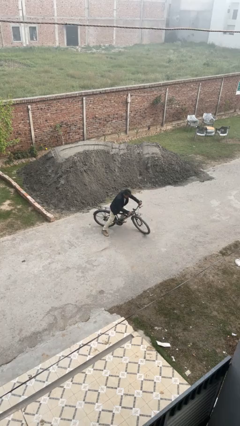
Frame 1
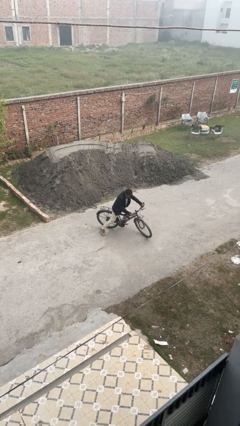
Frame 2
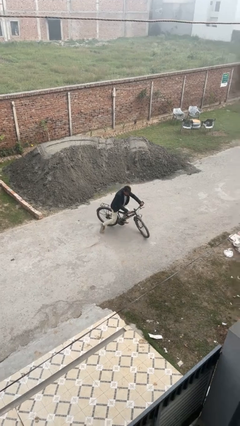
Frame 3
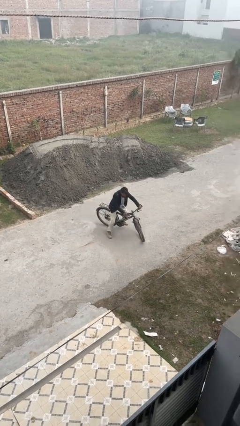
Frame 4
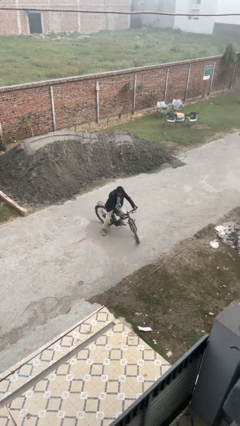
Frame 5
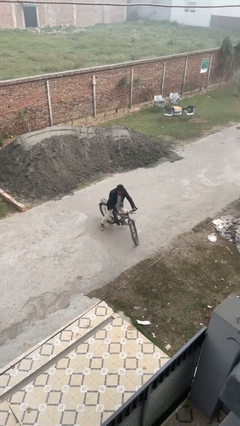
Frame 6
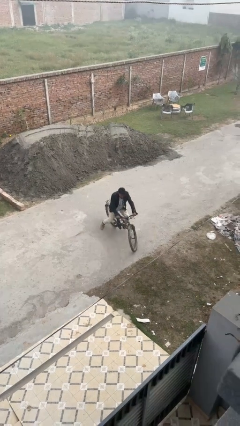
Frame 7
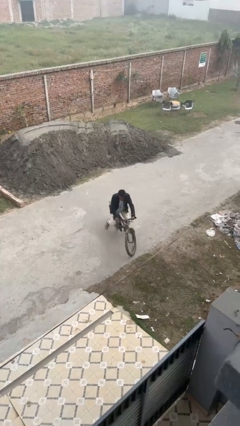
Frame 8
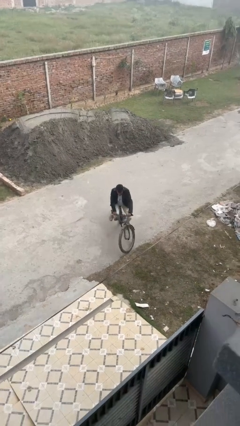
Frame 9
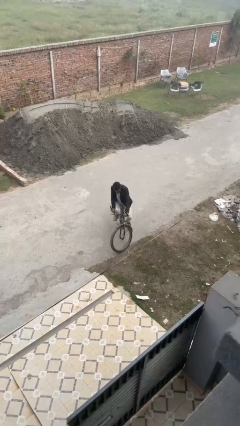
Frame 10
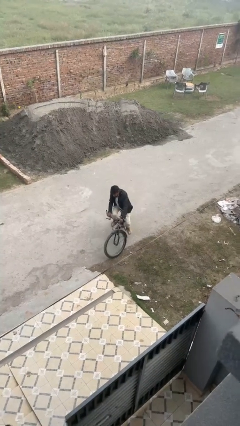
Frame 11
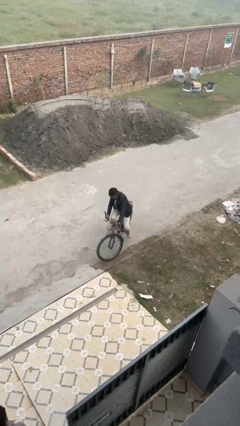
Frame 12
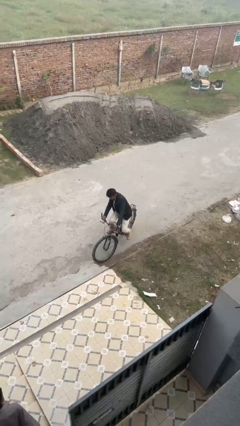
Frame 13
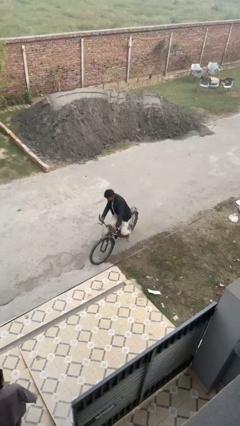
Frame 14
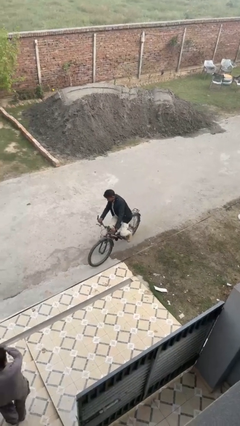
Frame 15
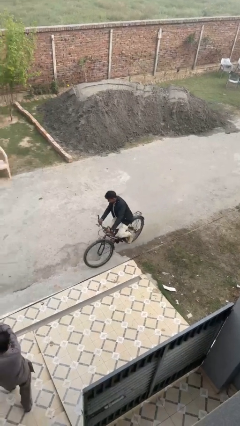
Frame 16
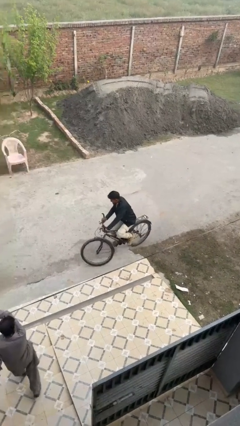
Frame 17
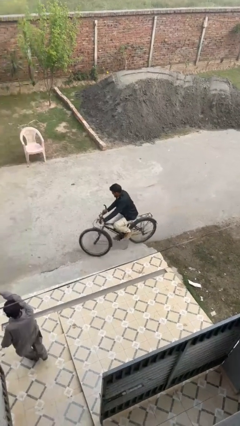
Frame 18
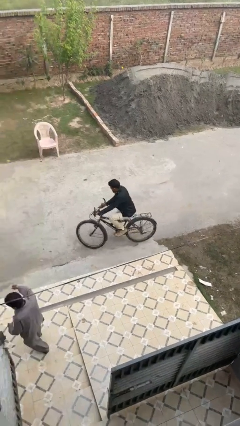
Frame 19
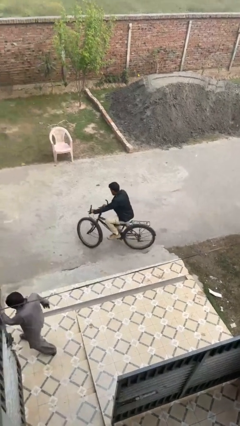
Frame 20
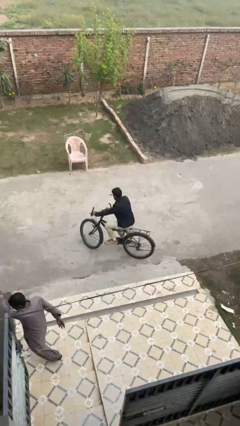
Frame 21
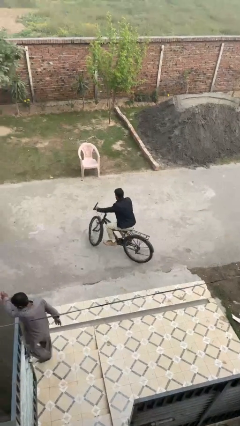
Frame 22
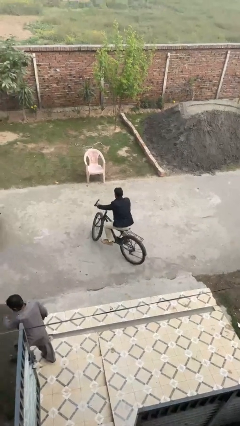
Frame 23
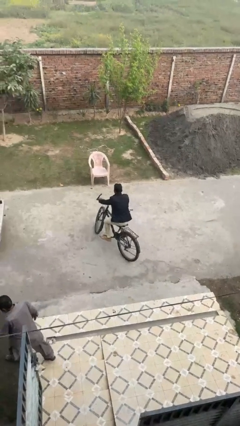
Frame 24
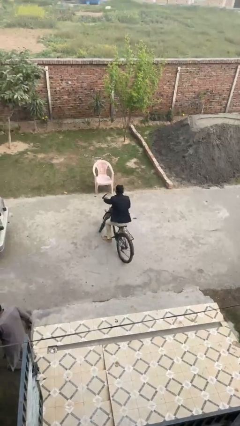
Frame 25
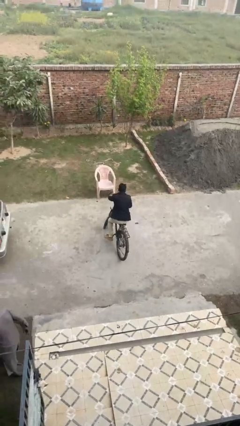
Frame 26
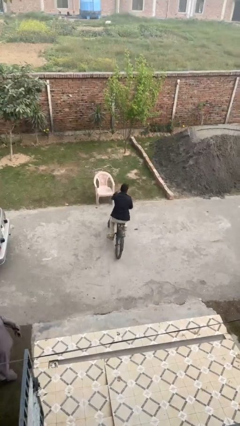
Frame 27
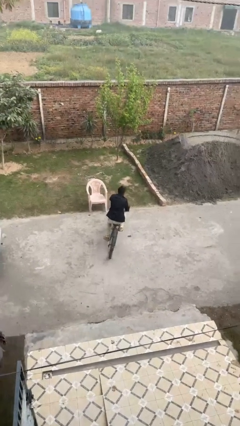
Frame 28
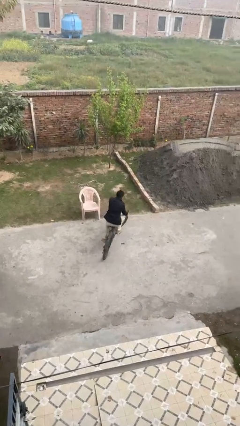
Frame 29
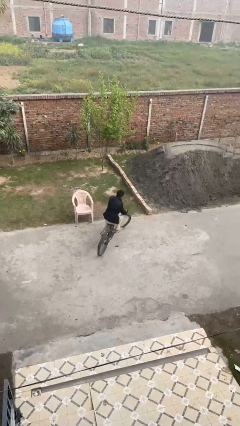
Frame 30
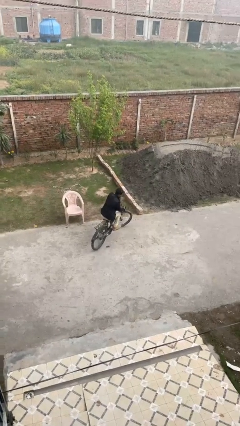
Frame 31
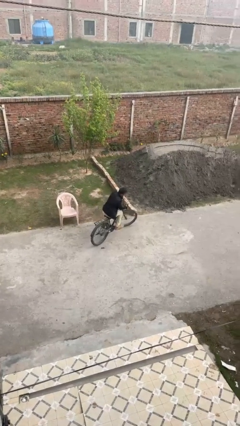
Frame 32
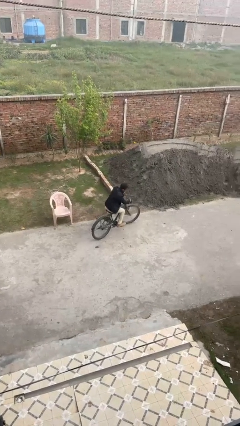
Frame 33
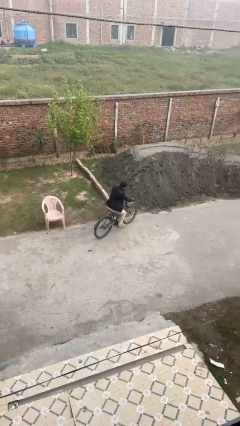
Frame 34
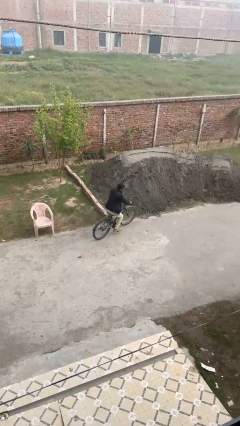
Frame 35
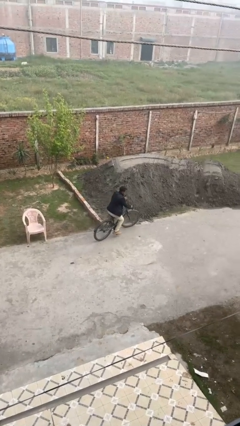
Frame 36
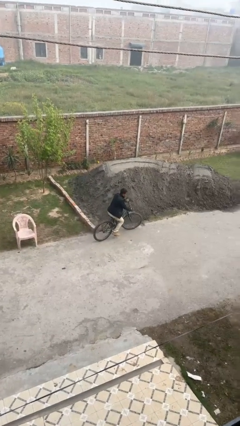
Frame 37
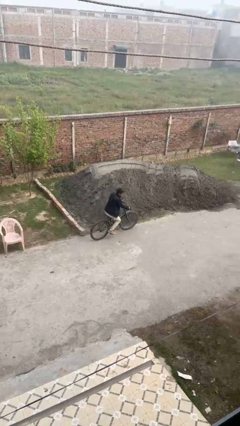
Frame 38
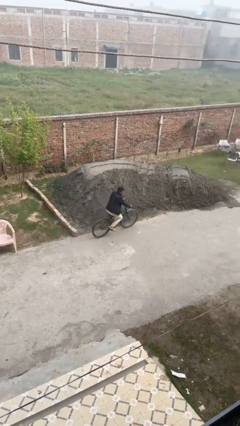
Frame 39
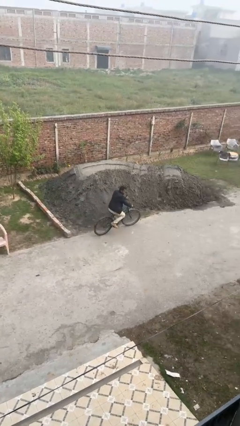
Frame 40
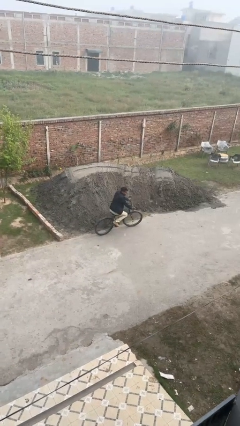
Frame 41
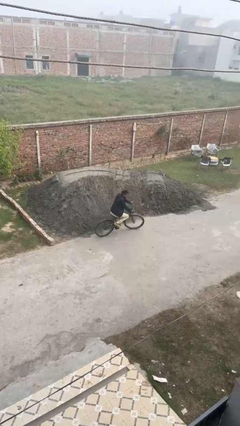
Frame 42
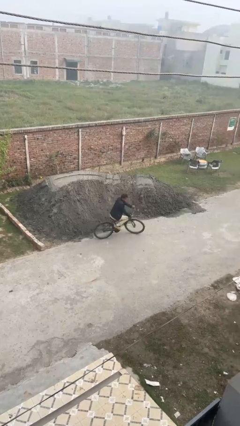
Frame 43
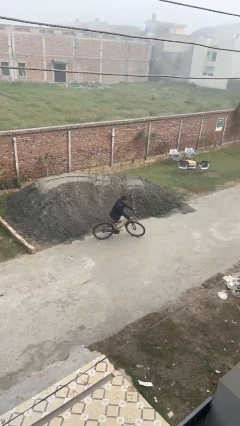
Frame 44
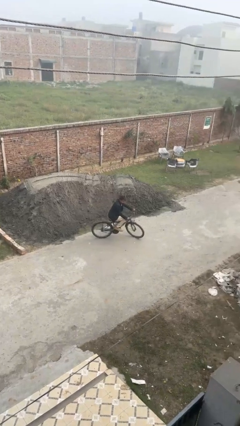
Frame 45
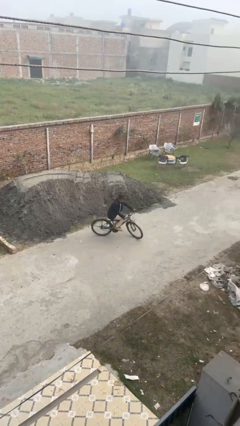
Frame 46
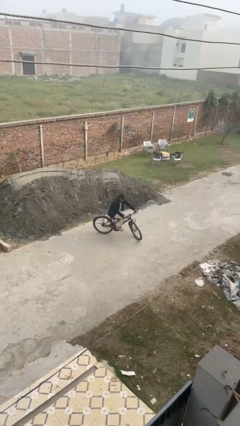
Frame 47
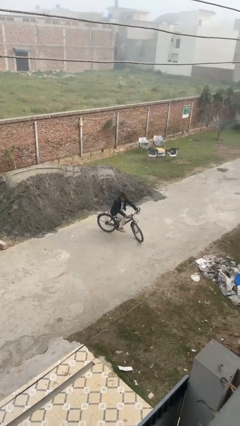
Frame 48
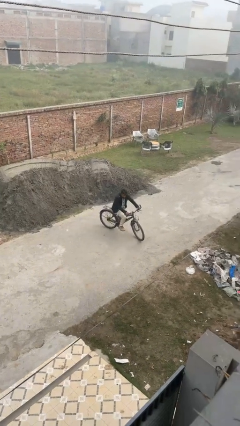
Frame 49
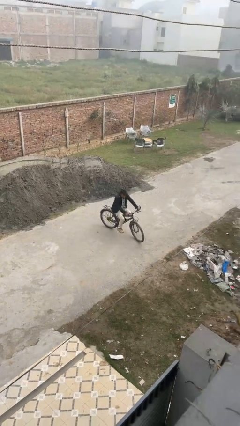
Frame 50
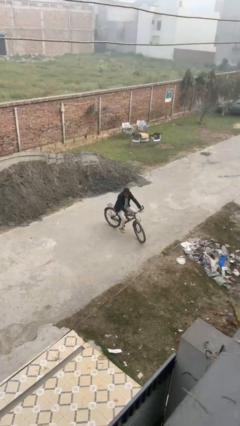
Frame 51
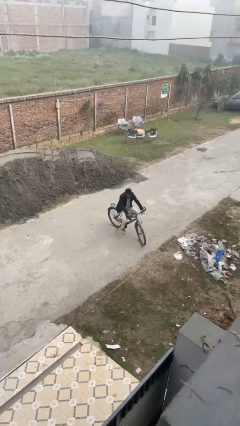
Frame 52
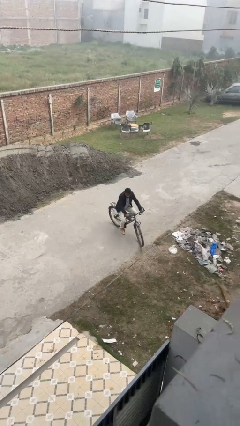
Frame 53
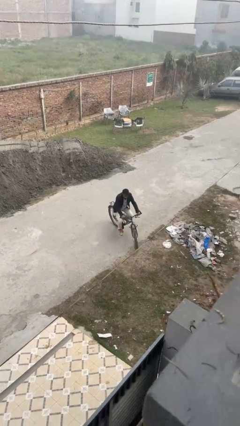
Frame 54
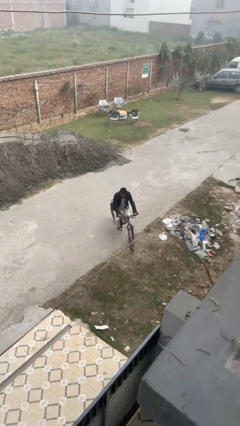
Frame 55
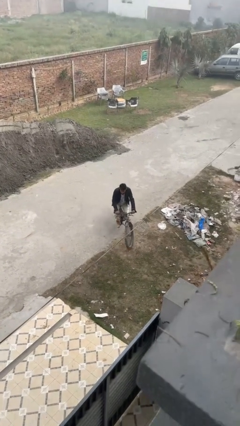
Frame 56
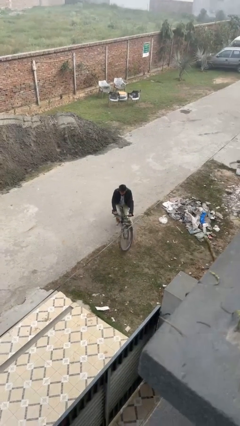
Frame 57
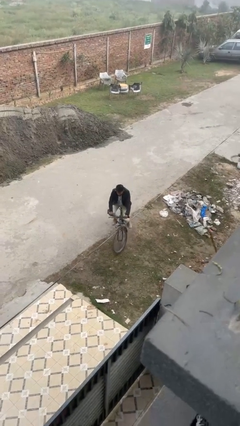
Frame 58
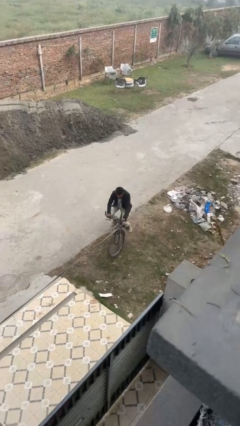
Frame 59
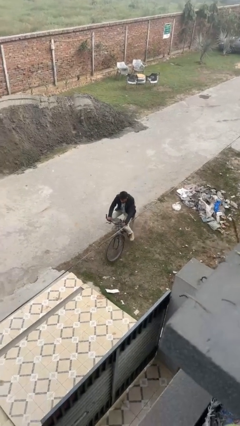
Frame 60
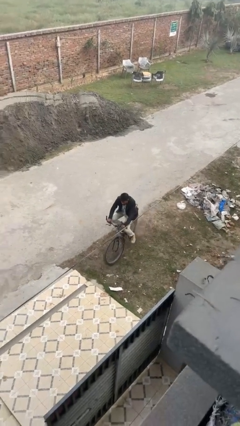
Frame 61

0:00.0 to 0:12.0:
person rides bicycle

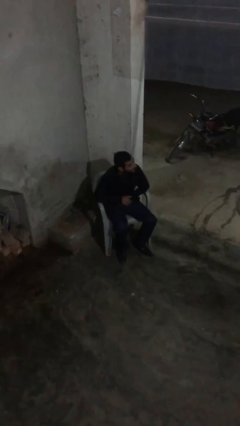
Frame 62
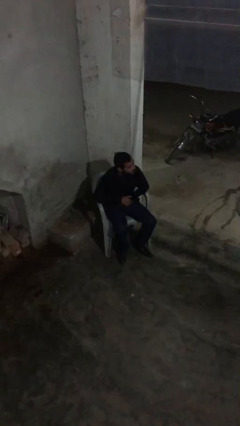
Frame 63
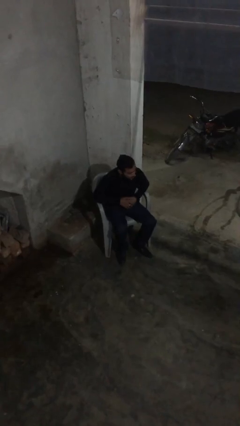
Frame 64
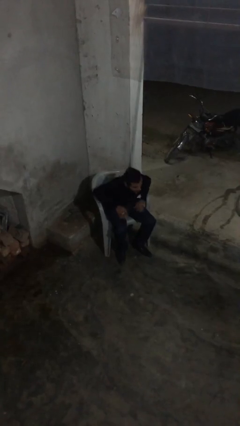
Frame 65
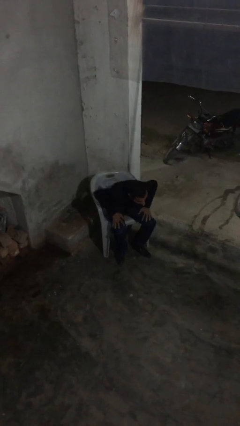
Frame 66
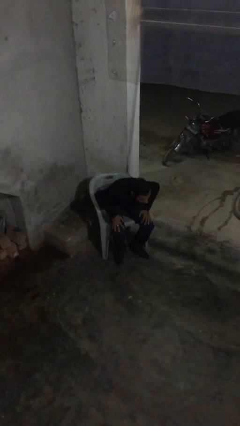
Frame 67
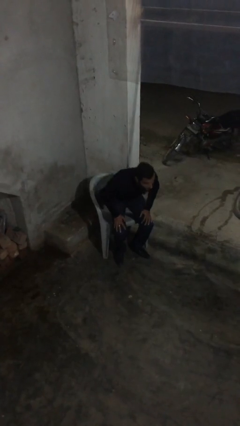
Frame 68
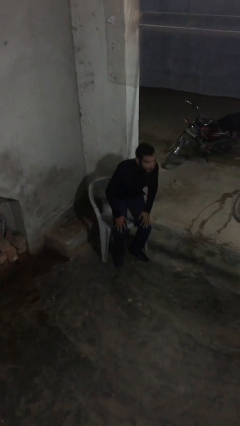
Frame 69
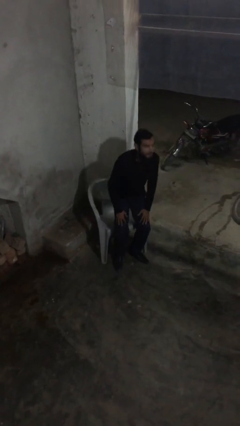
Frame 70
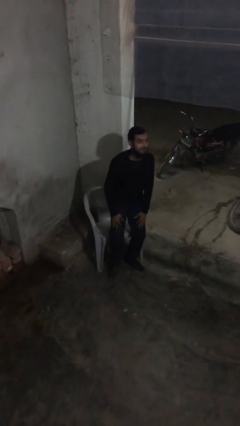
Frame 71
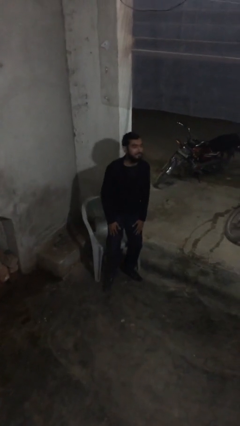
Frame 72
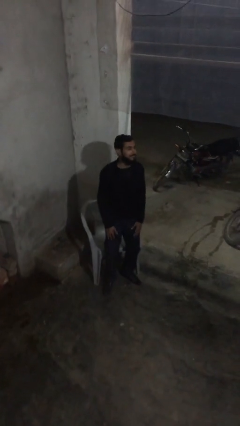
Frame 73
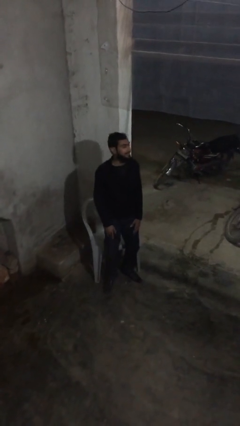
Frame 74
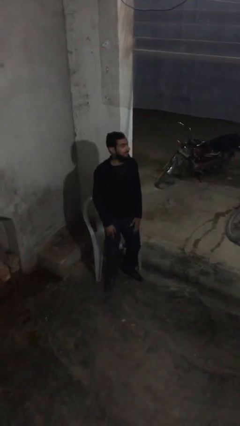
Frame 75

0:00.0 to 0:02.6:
person stands up

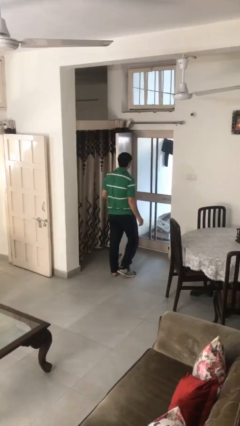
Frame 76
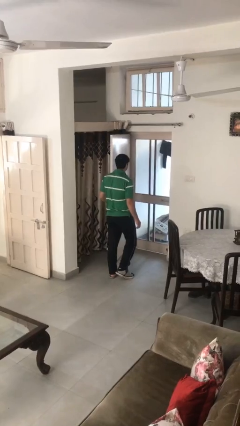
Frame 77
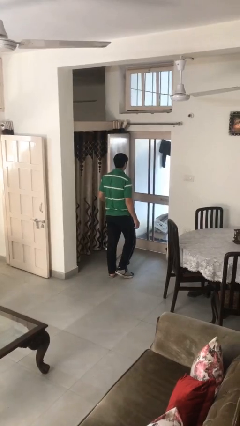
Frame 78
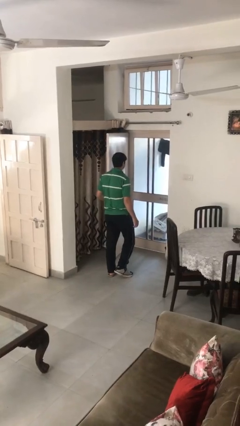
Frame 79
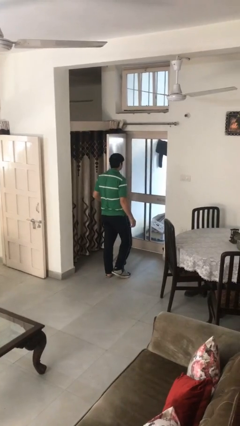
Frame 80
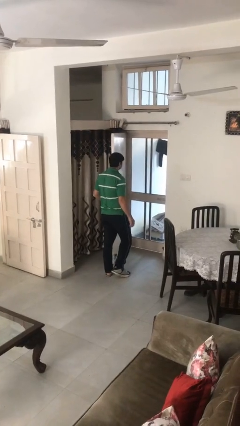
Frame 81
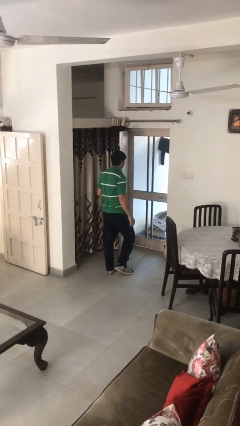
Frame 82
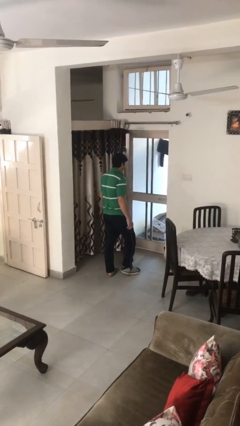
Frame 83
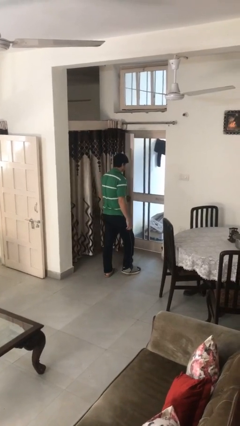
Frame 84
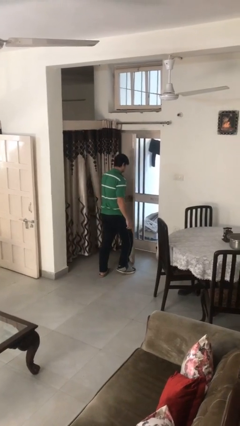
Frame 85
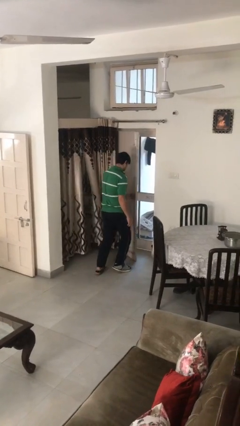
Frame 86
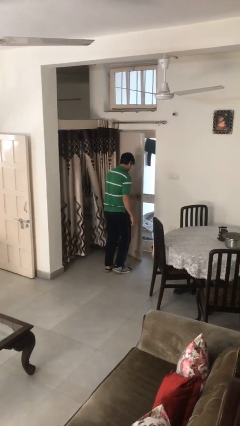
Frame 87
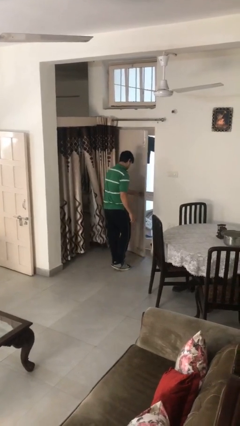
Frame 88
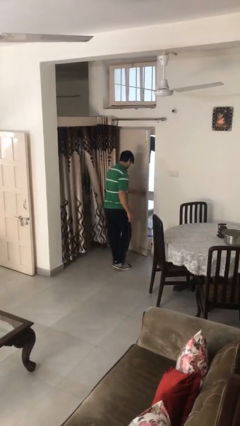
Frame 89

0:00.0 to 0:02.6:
person closes facility door

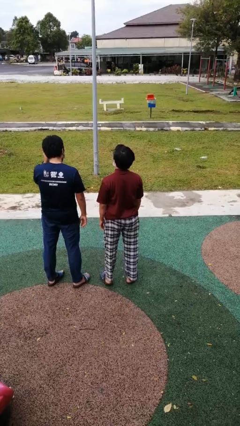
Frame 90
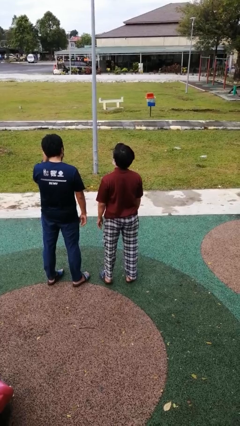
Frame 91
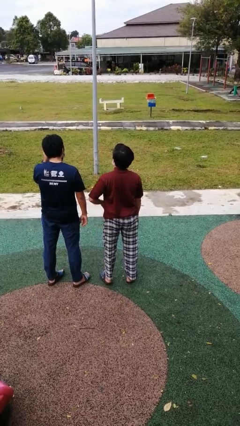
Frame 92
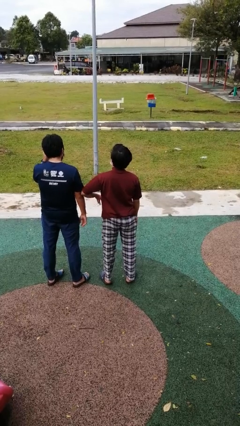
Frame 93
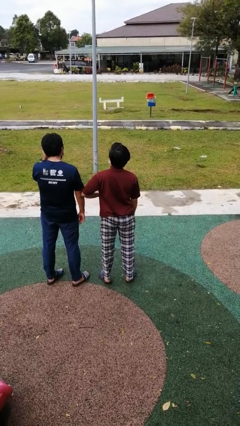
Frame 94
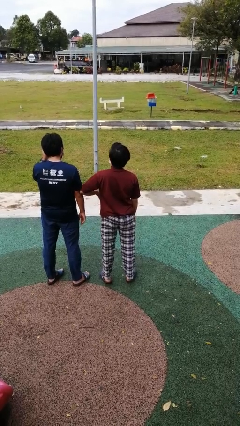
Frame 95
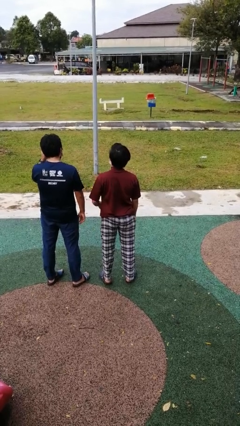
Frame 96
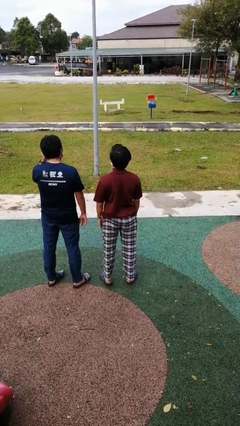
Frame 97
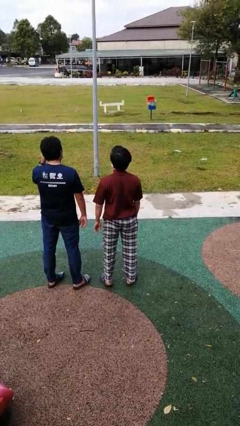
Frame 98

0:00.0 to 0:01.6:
person nudges person with elbow
